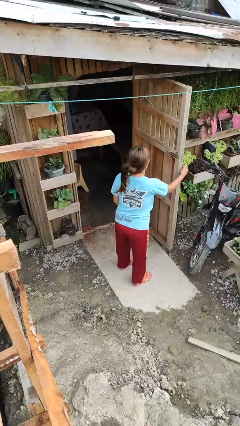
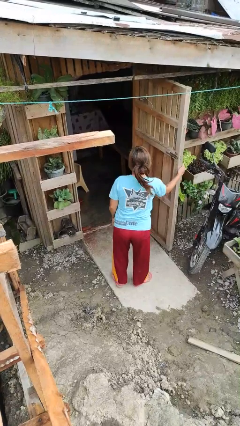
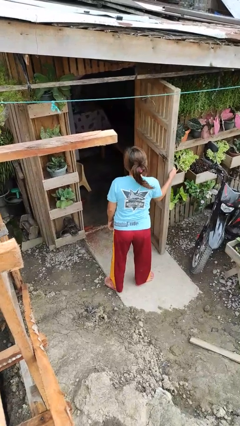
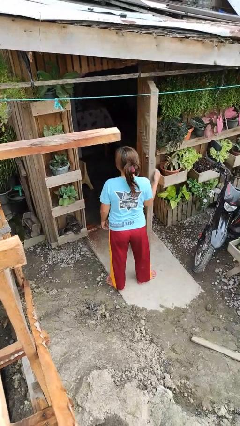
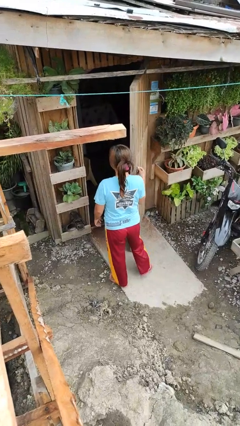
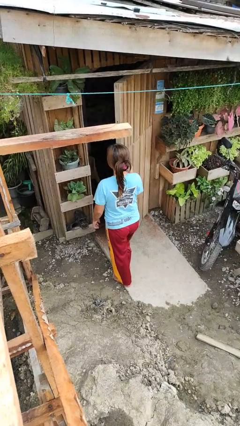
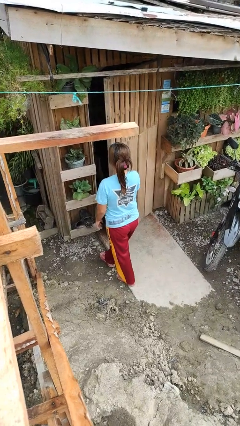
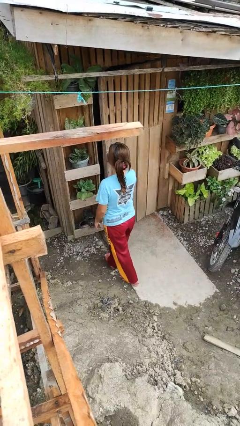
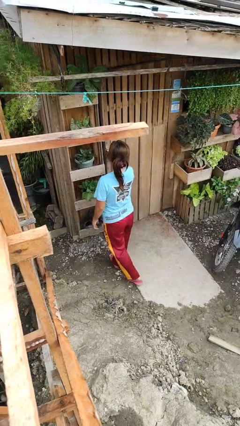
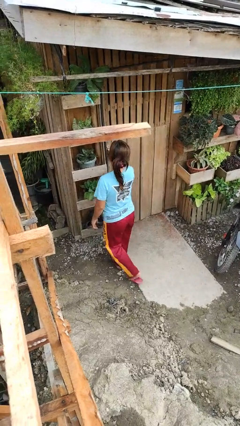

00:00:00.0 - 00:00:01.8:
person closes facility door

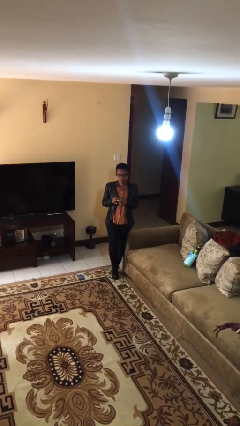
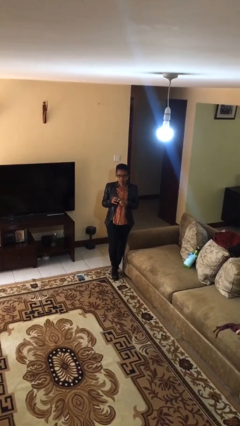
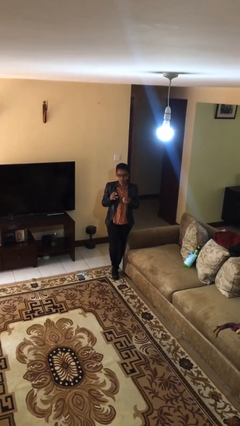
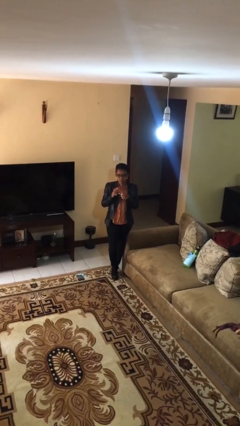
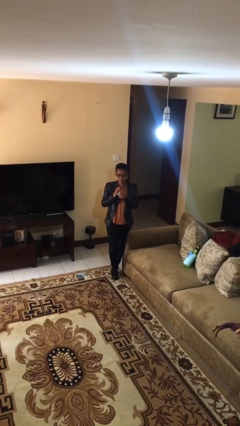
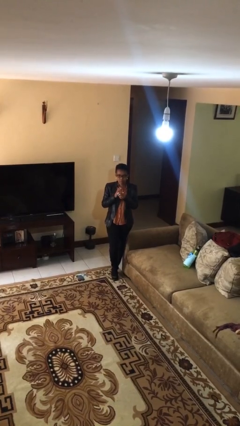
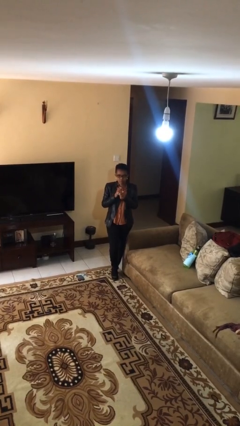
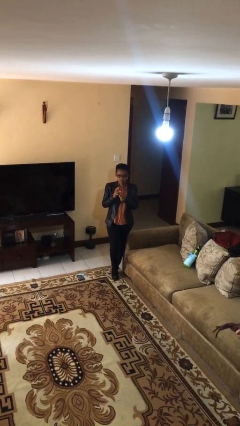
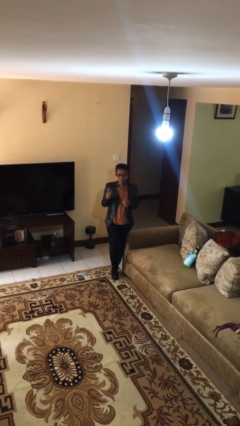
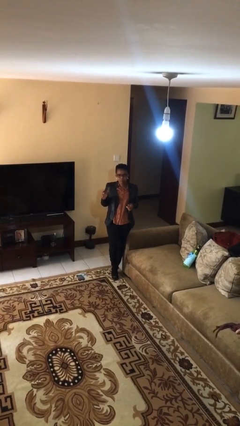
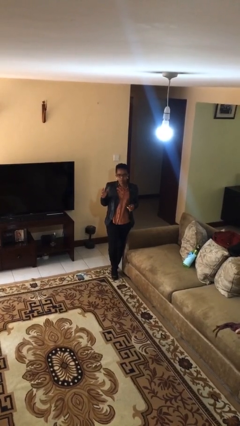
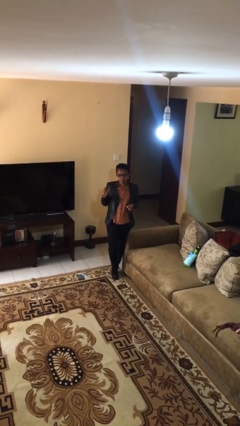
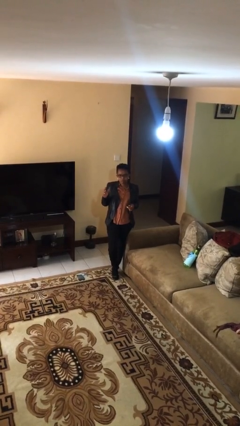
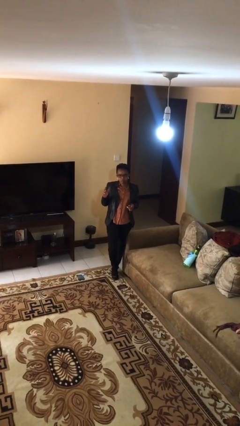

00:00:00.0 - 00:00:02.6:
person puts on ring

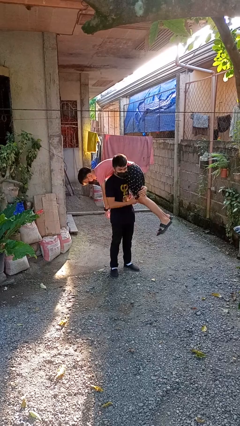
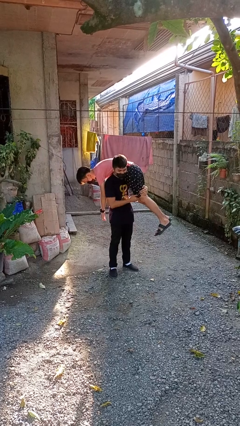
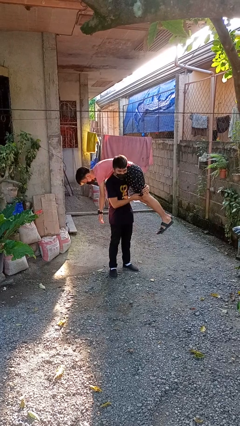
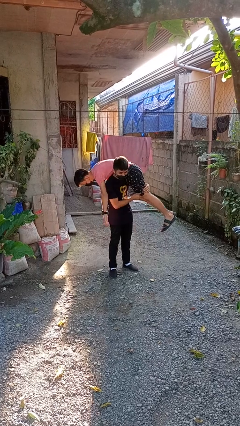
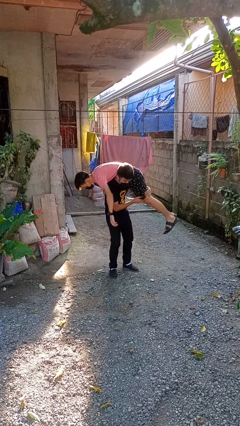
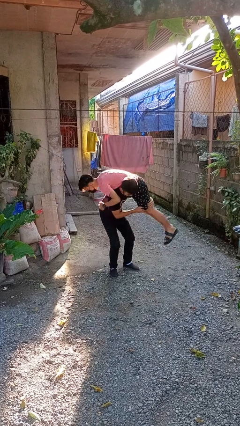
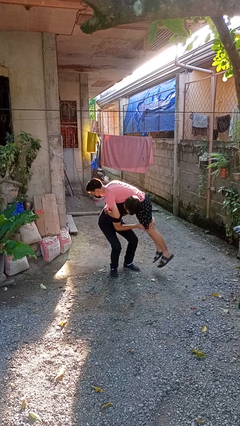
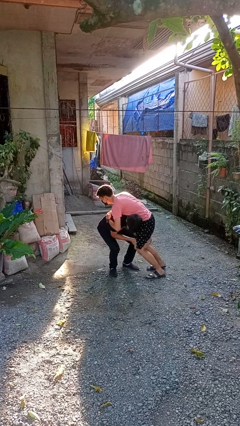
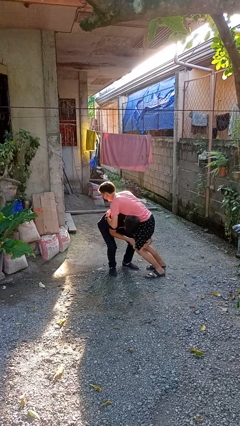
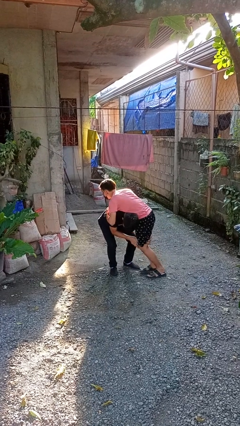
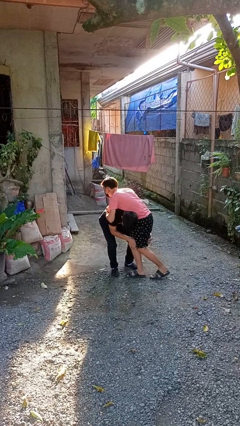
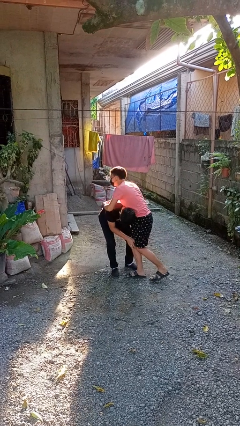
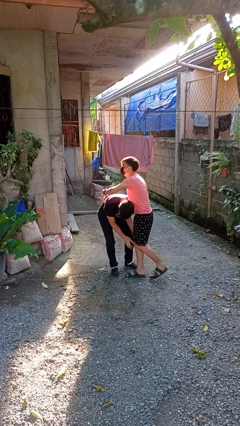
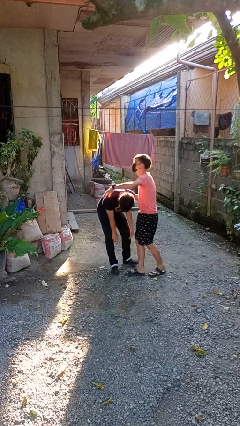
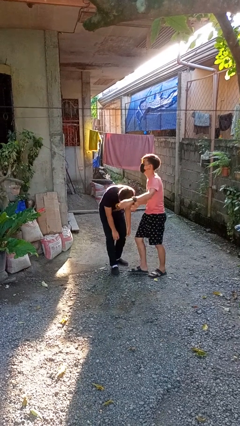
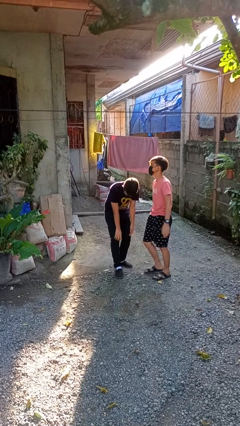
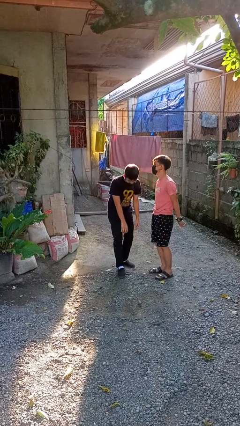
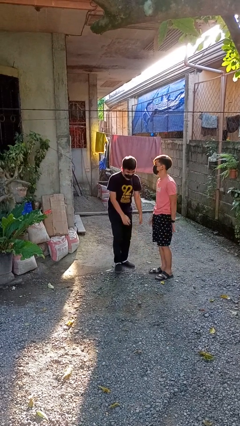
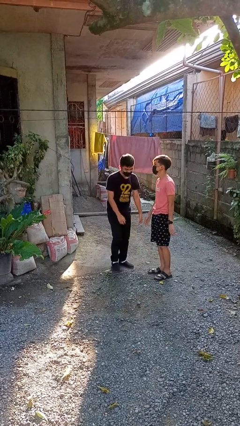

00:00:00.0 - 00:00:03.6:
person puts down person

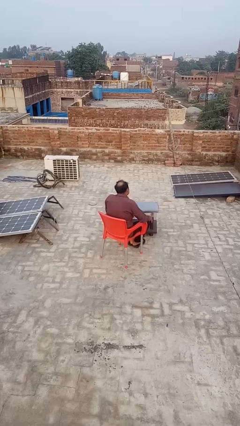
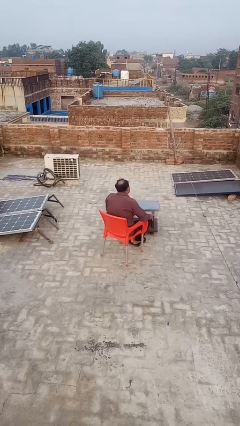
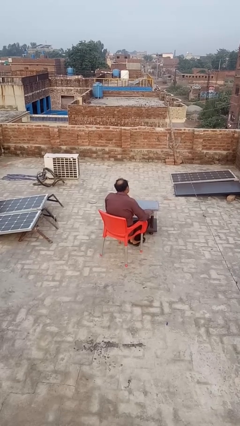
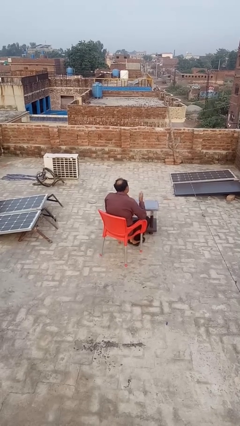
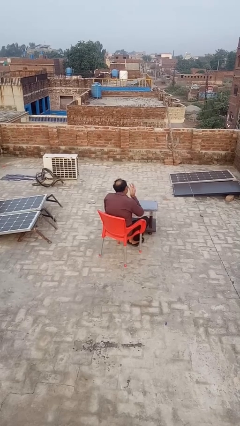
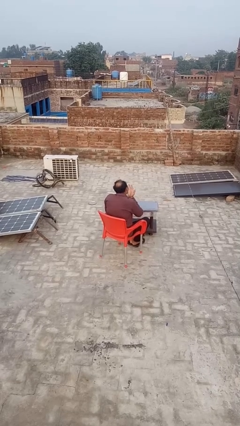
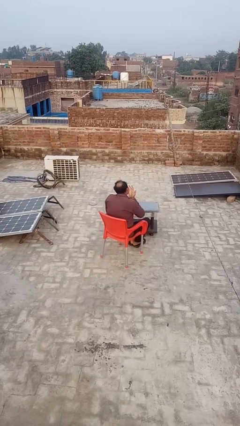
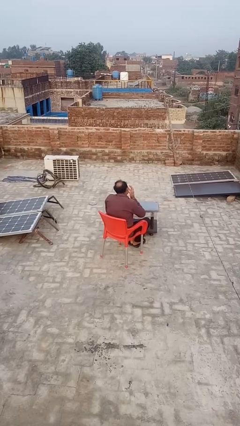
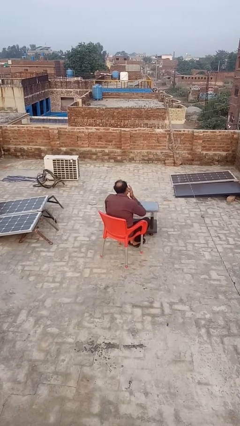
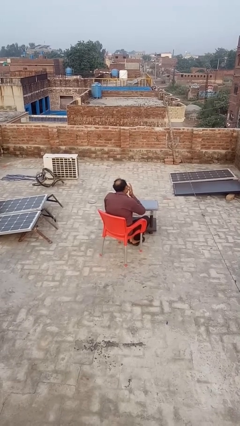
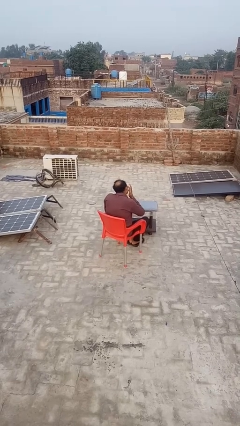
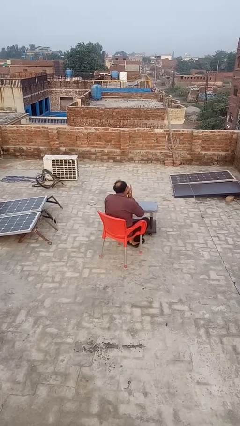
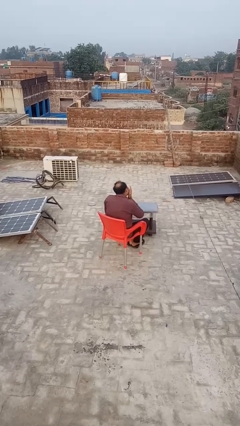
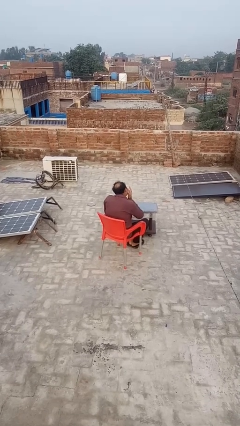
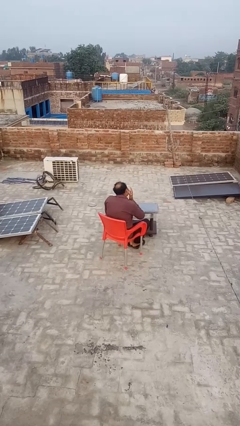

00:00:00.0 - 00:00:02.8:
person licks fingers

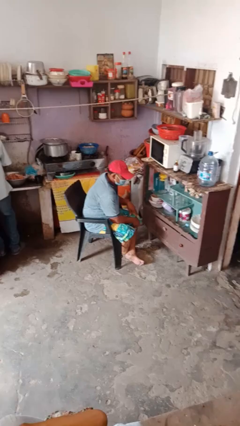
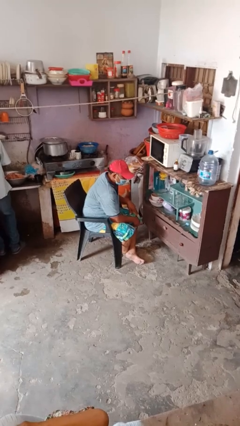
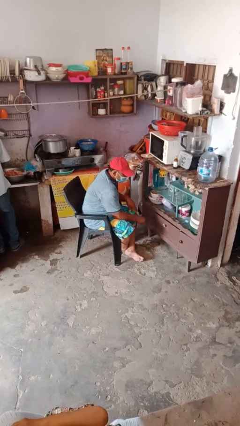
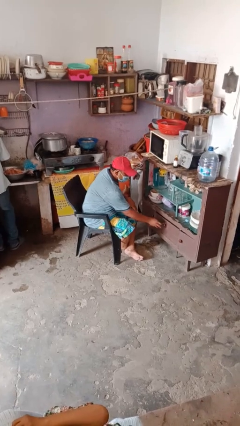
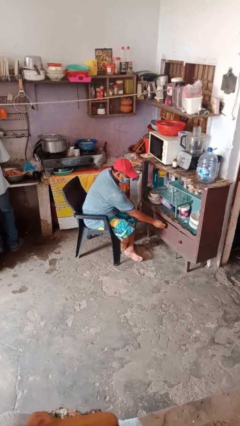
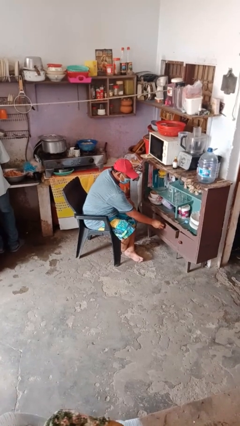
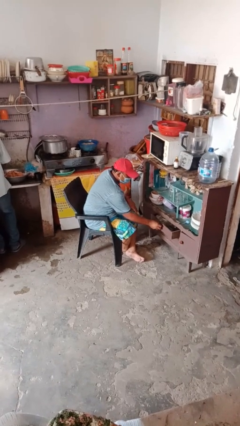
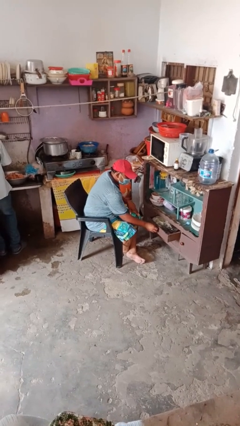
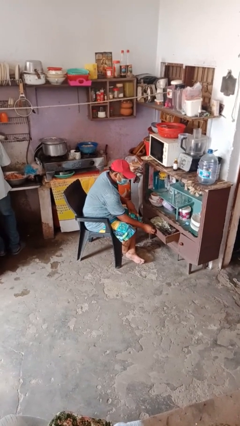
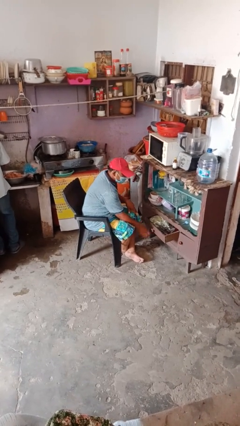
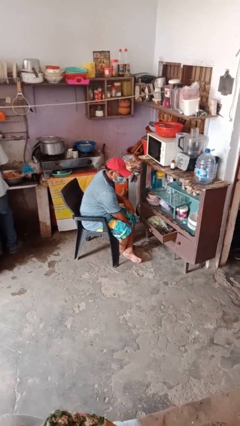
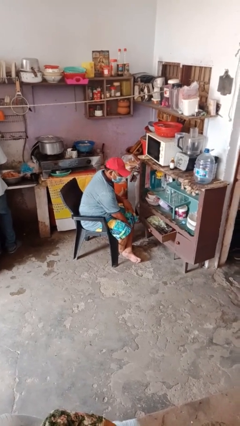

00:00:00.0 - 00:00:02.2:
person opens dresser drawer

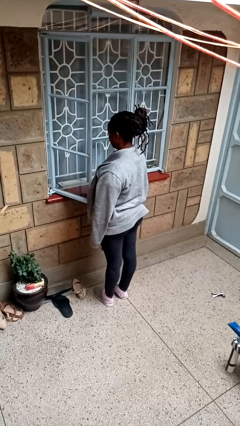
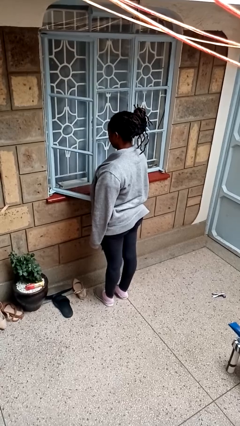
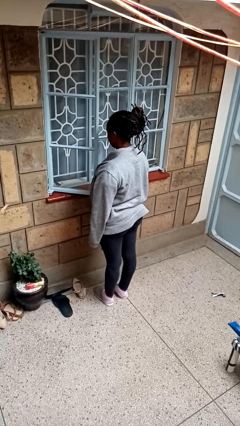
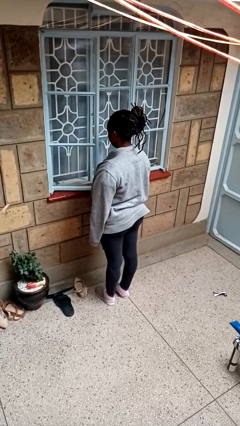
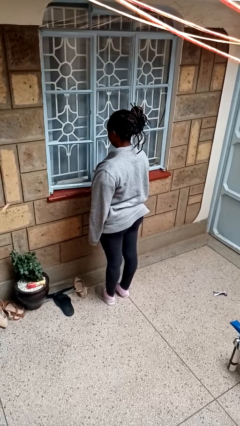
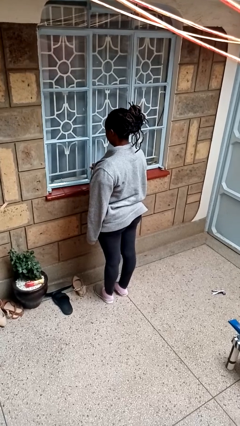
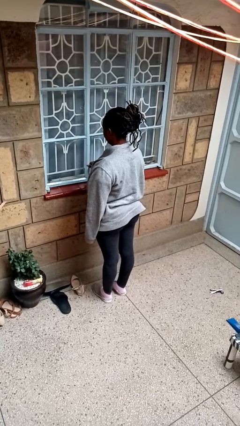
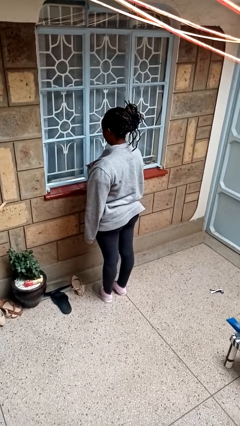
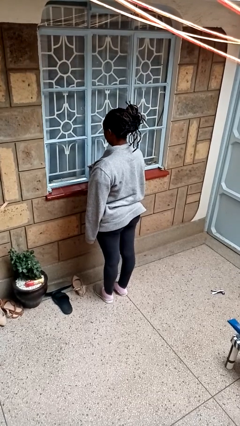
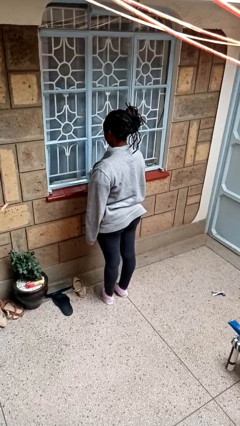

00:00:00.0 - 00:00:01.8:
person closes home window

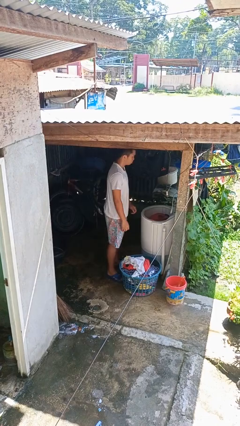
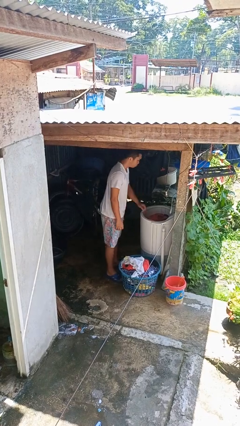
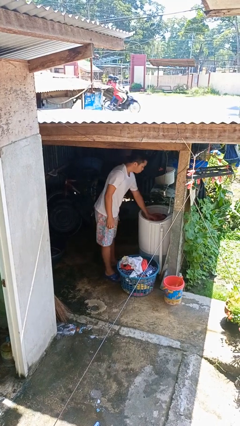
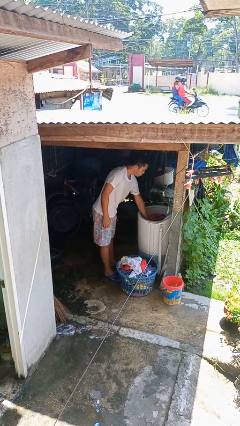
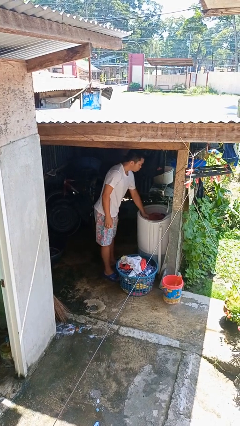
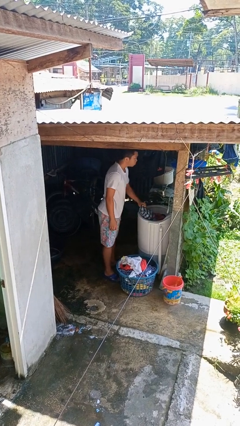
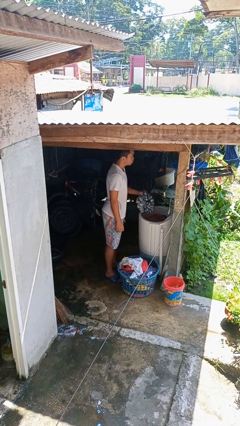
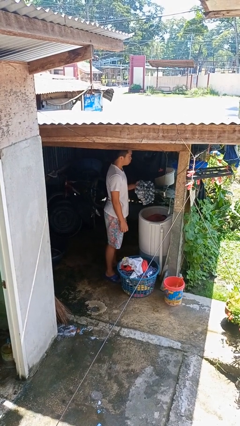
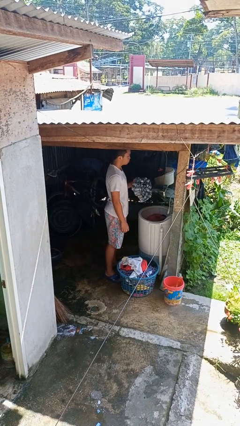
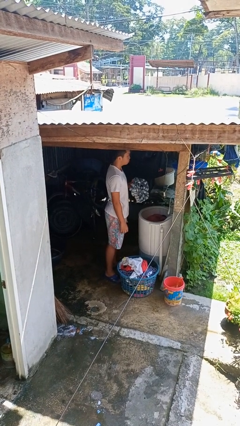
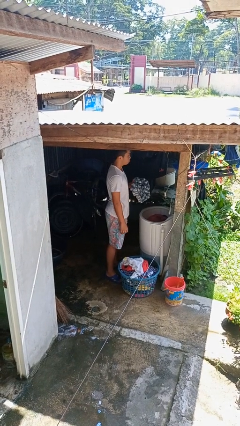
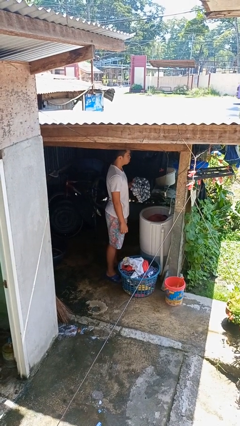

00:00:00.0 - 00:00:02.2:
person unloads clotheswasher
